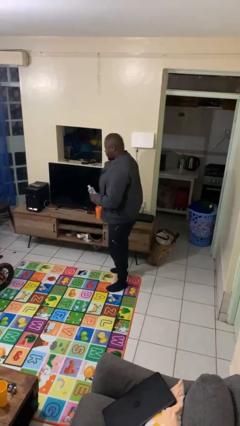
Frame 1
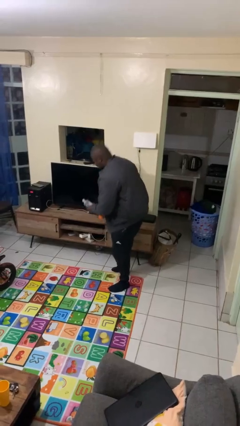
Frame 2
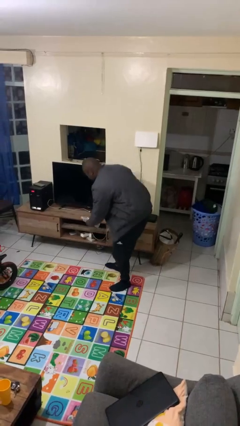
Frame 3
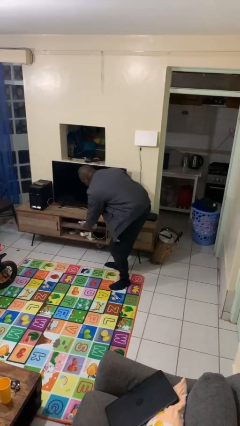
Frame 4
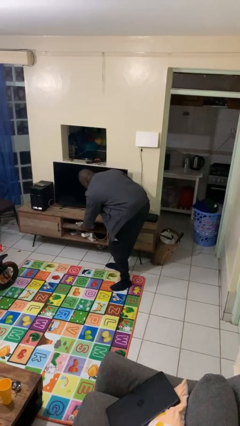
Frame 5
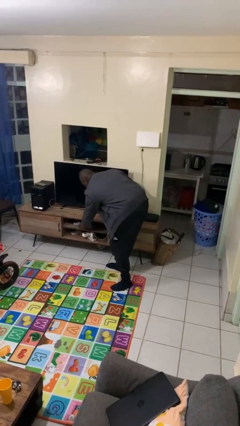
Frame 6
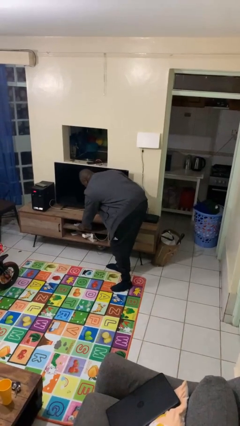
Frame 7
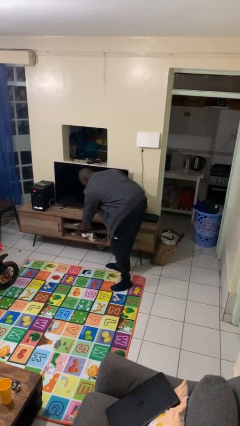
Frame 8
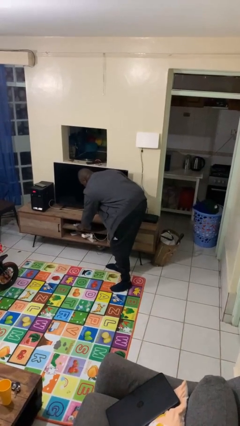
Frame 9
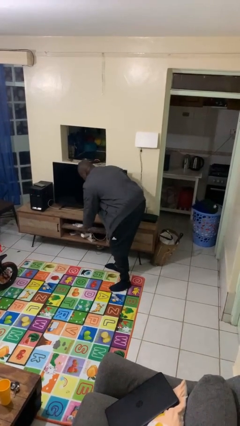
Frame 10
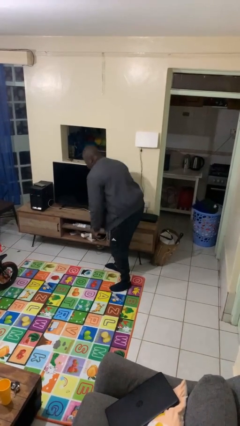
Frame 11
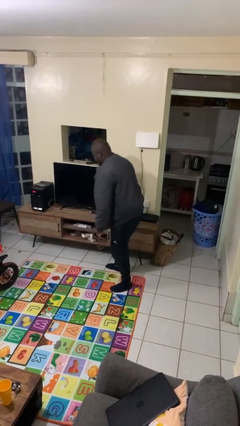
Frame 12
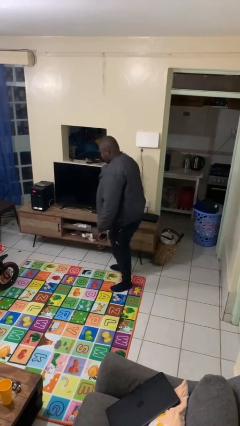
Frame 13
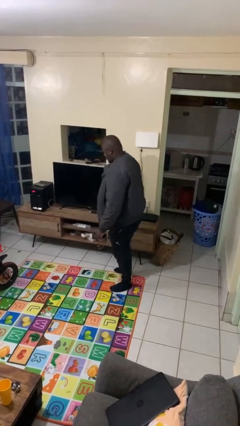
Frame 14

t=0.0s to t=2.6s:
person puts down object into cabinet

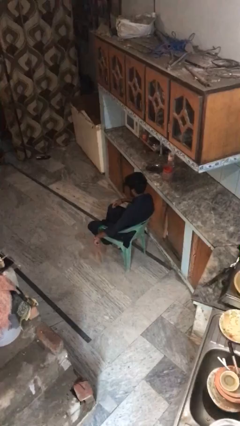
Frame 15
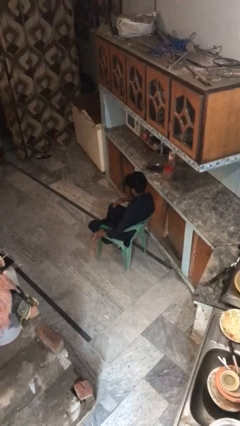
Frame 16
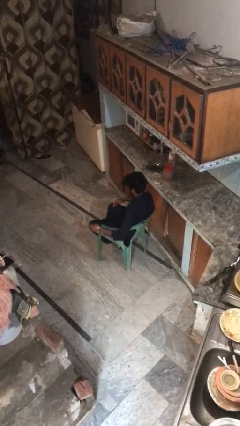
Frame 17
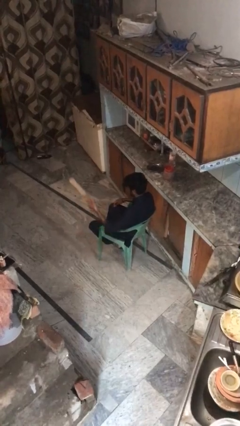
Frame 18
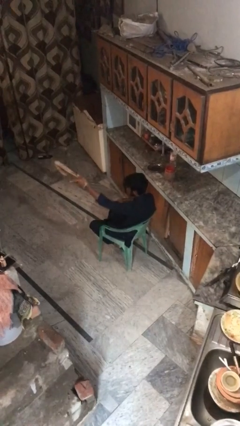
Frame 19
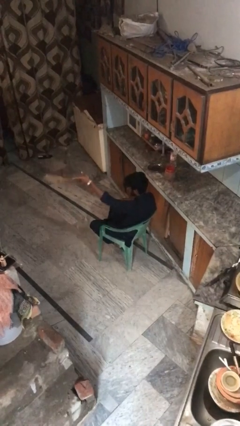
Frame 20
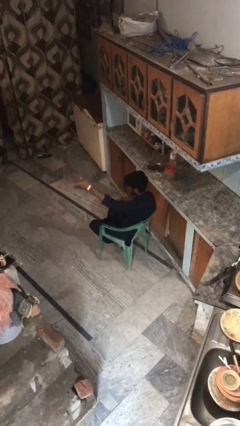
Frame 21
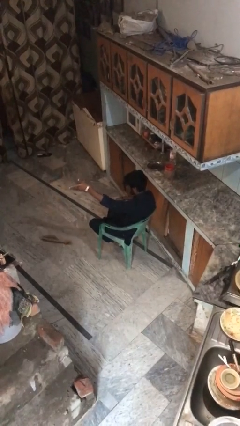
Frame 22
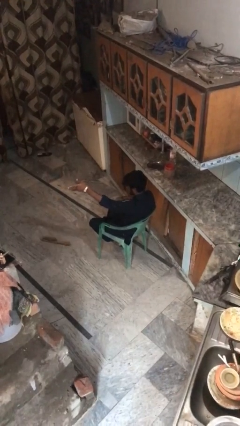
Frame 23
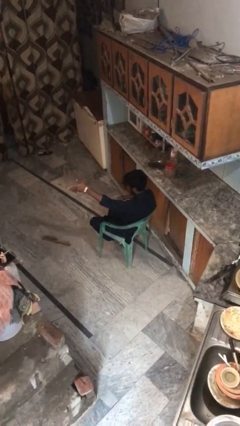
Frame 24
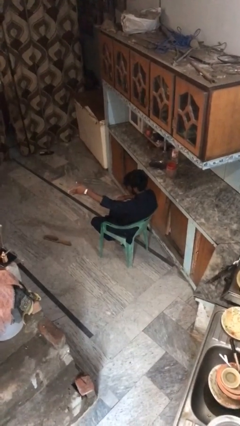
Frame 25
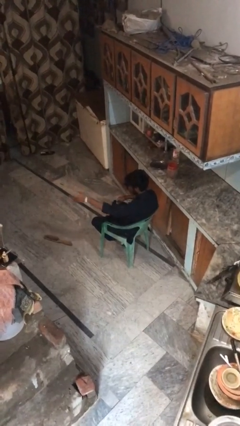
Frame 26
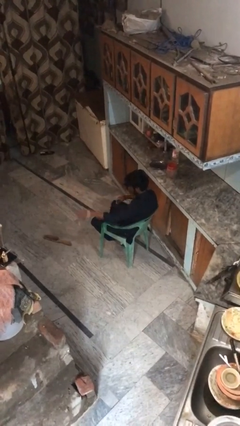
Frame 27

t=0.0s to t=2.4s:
person throws object to ground

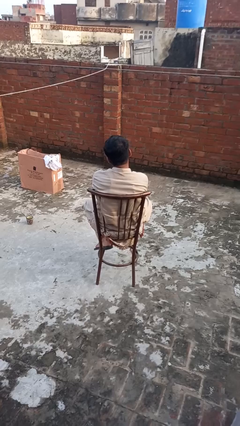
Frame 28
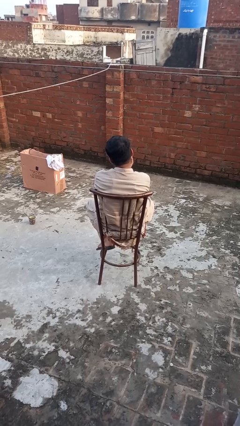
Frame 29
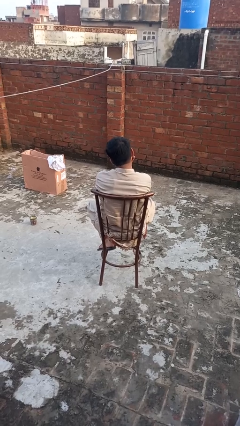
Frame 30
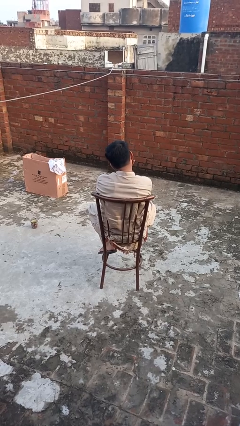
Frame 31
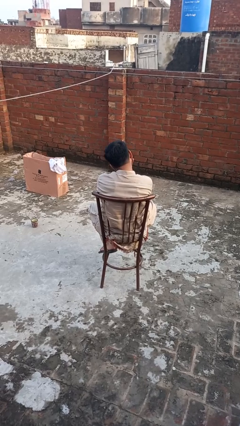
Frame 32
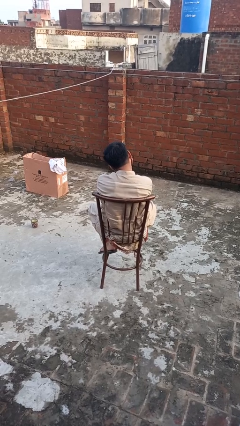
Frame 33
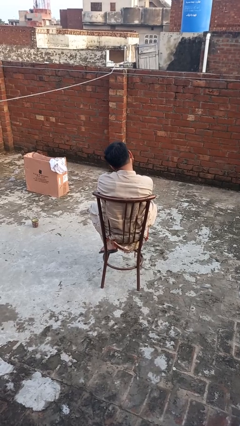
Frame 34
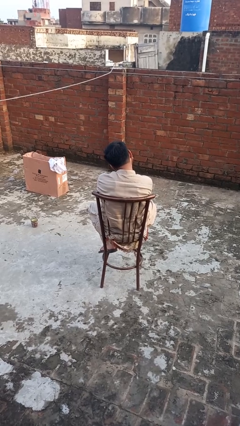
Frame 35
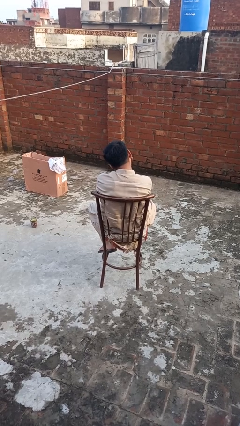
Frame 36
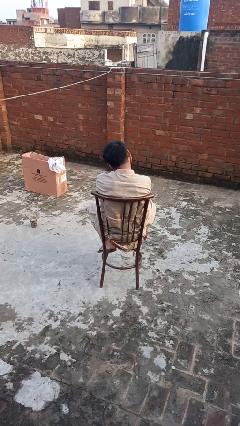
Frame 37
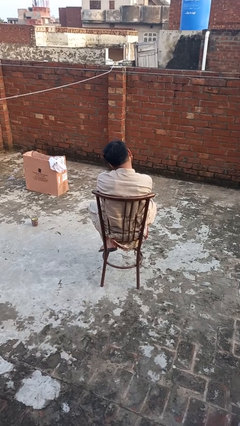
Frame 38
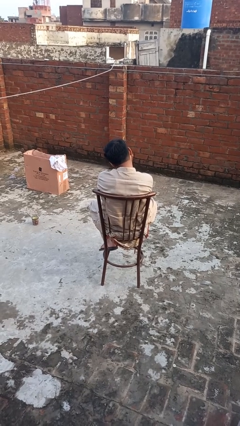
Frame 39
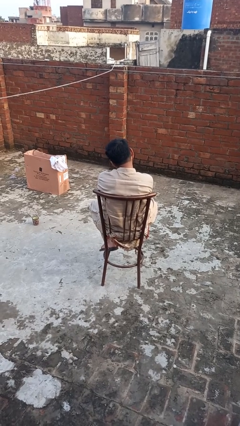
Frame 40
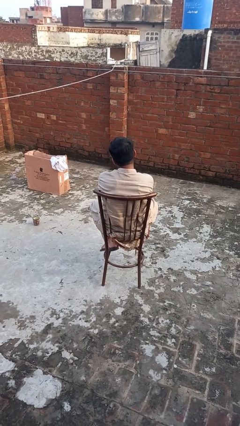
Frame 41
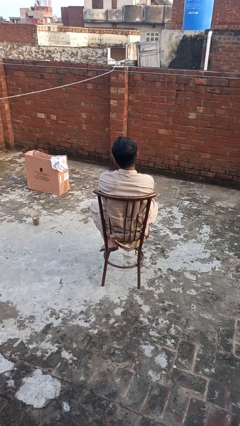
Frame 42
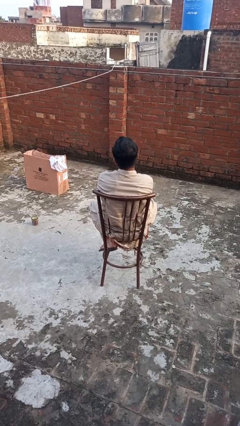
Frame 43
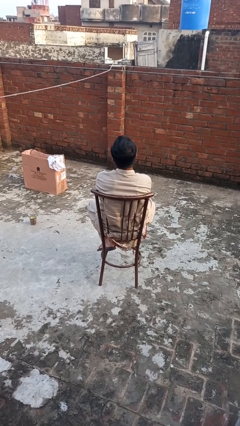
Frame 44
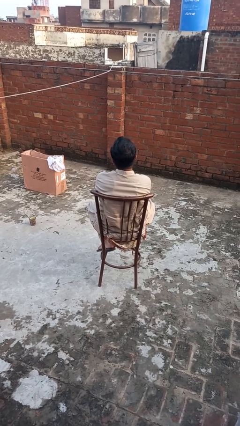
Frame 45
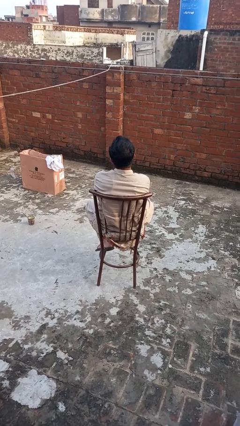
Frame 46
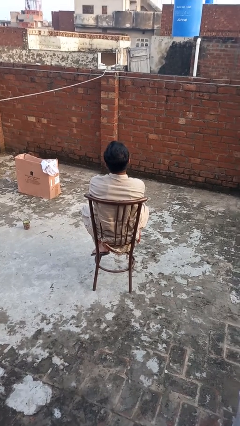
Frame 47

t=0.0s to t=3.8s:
person strokes chin

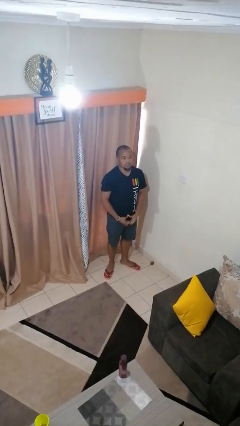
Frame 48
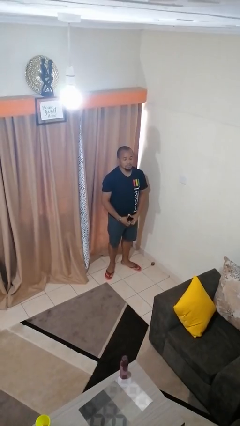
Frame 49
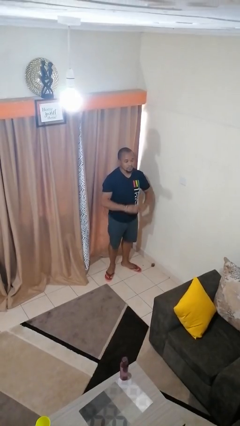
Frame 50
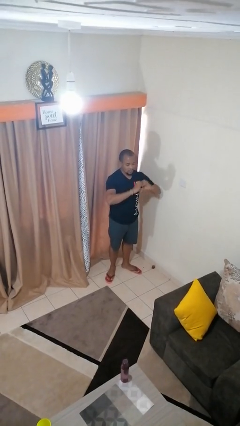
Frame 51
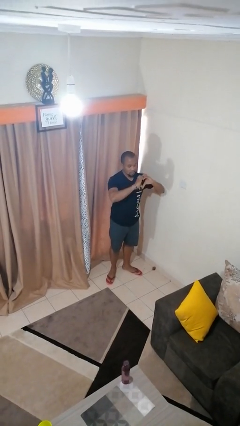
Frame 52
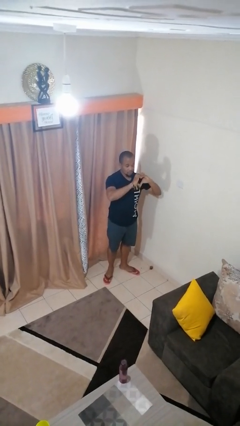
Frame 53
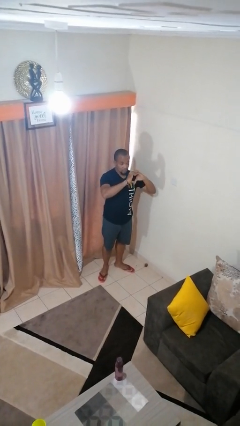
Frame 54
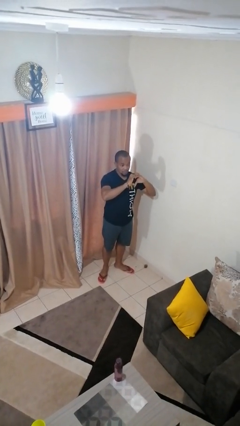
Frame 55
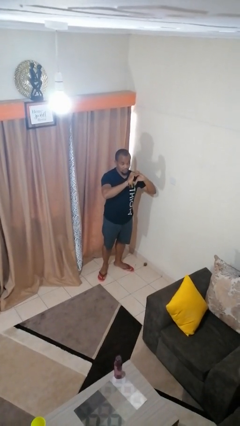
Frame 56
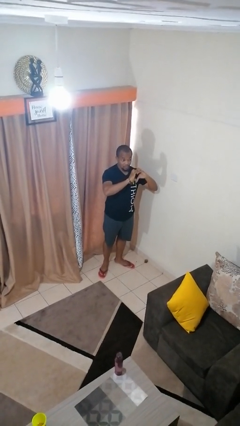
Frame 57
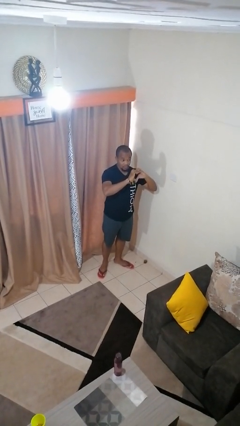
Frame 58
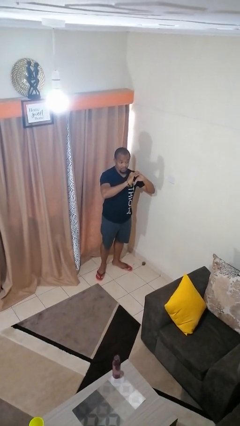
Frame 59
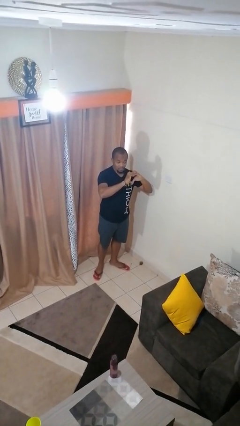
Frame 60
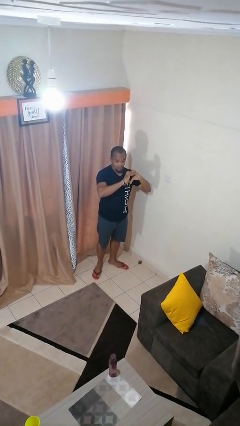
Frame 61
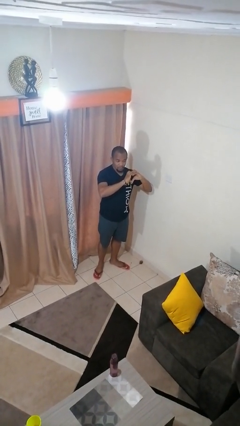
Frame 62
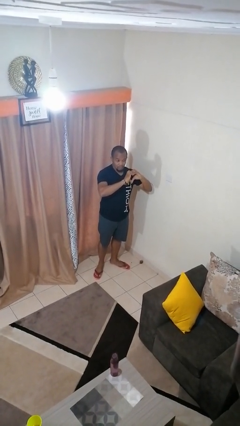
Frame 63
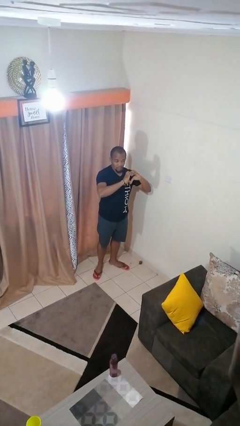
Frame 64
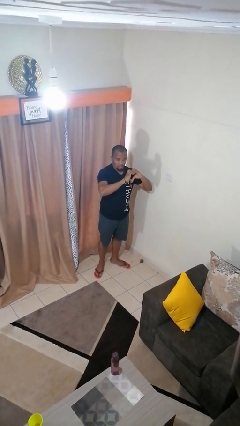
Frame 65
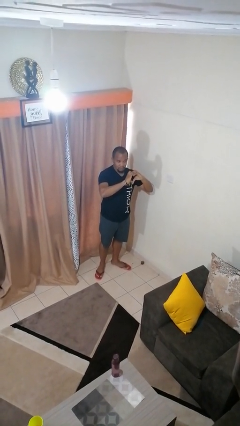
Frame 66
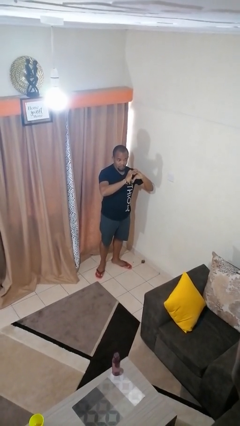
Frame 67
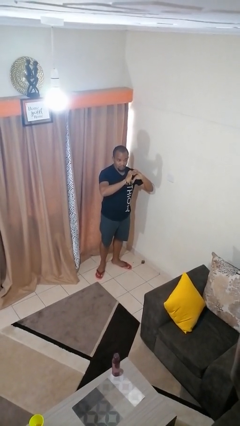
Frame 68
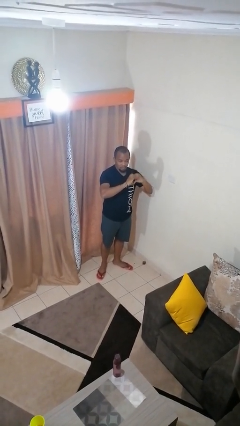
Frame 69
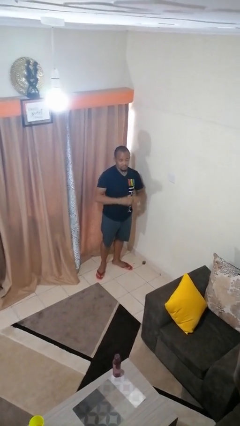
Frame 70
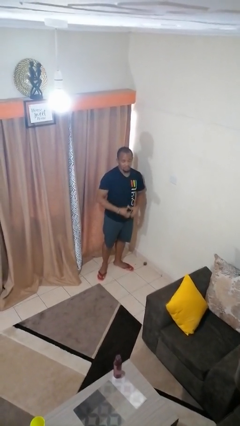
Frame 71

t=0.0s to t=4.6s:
person gestures heart

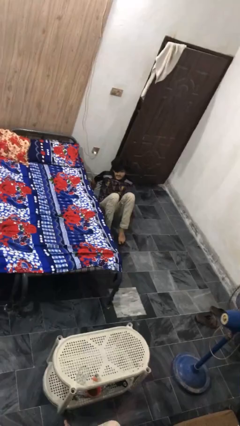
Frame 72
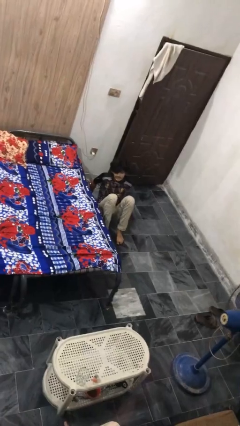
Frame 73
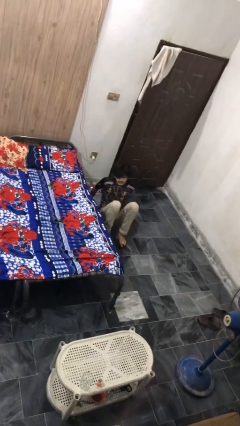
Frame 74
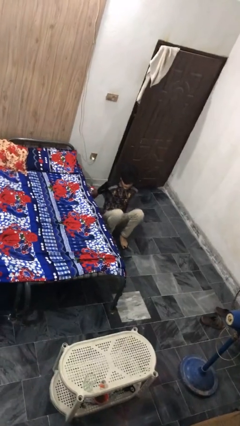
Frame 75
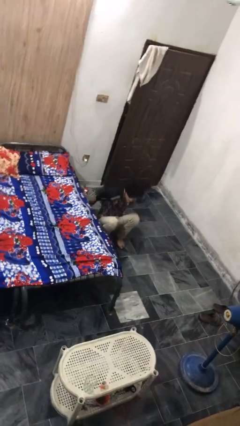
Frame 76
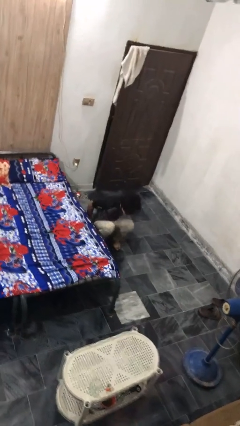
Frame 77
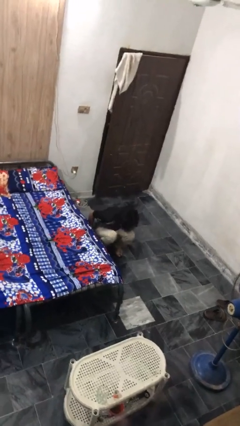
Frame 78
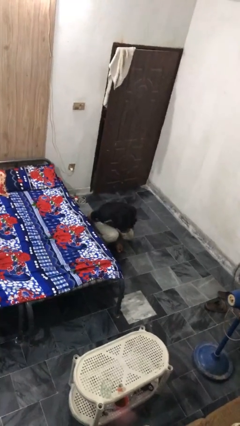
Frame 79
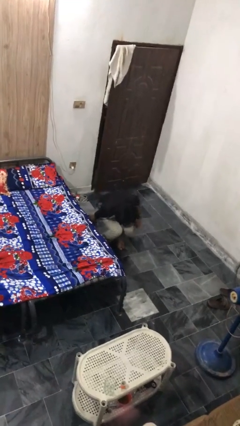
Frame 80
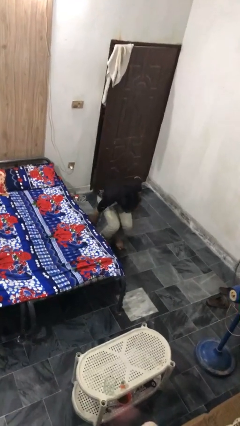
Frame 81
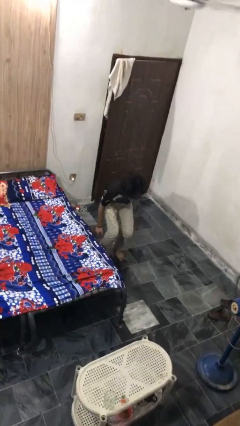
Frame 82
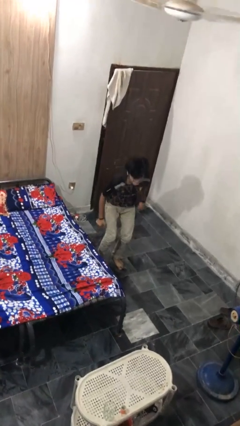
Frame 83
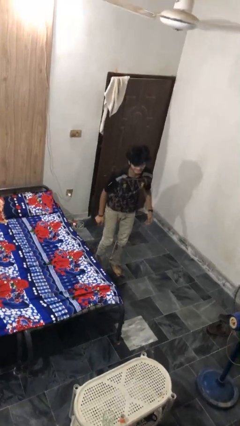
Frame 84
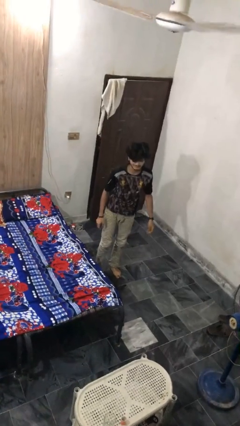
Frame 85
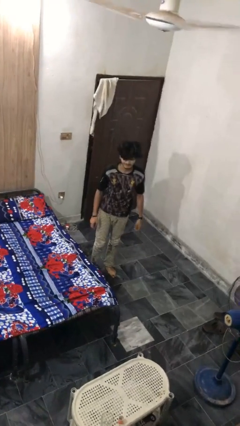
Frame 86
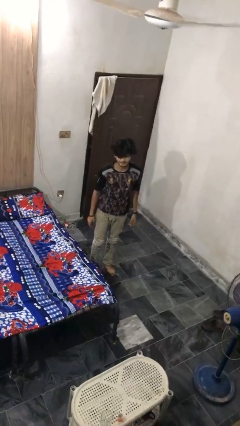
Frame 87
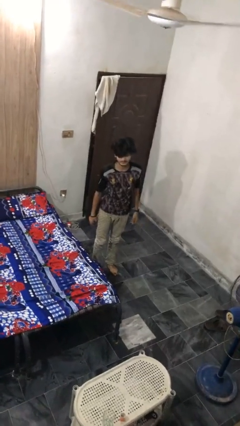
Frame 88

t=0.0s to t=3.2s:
person stands up from floor

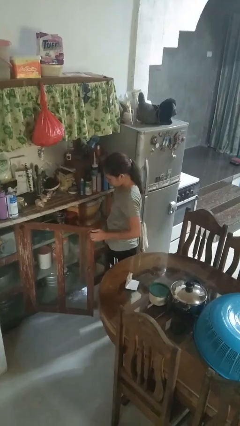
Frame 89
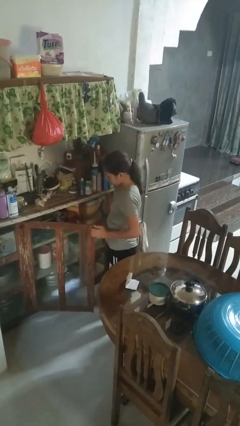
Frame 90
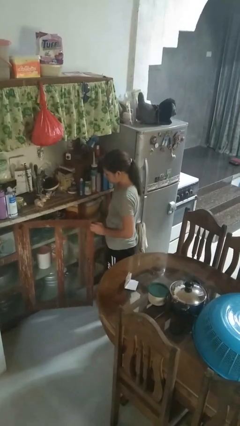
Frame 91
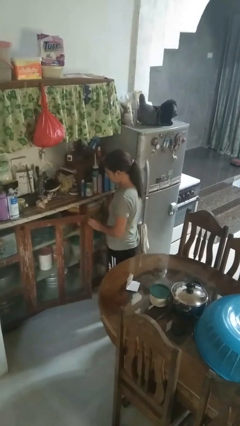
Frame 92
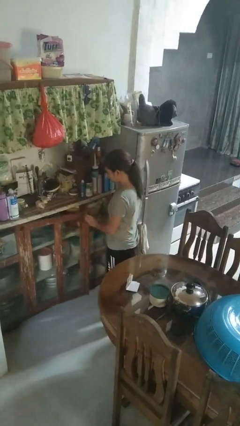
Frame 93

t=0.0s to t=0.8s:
person closes cabinet

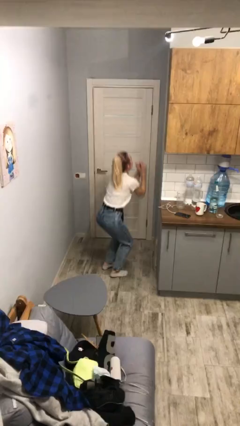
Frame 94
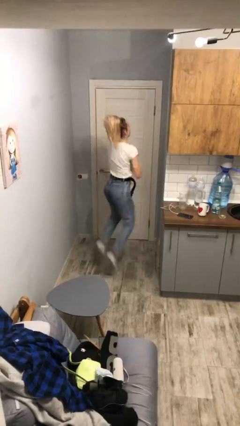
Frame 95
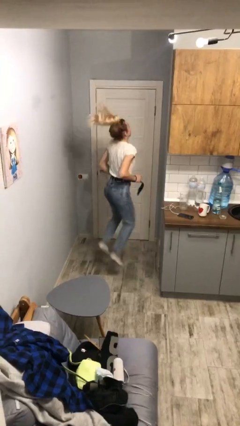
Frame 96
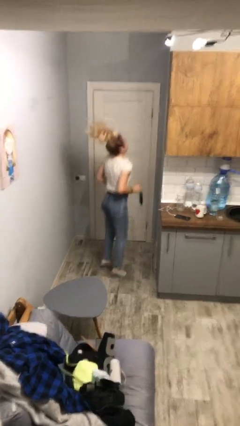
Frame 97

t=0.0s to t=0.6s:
person jumps
